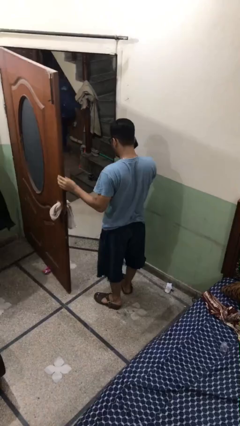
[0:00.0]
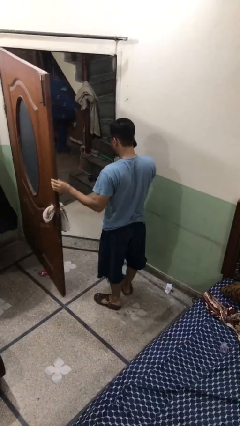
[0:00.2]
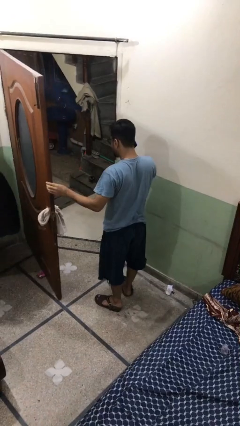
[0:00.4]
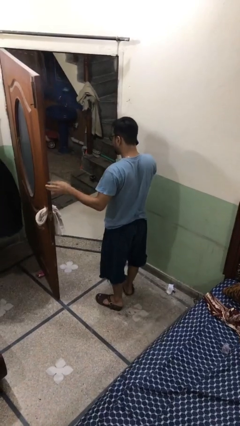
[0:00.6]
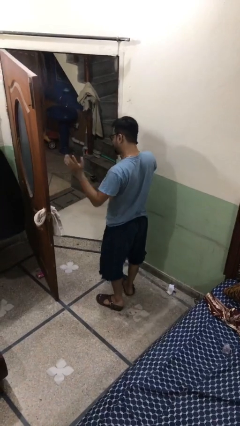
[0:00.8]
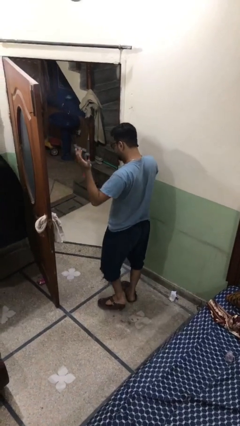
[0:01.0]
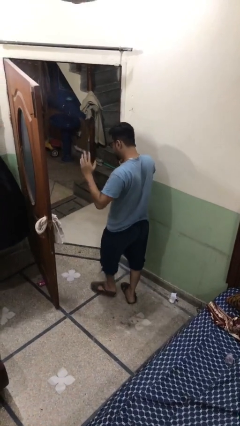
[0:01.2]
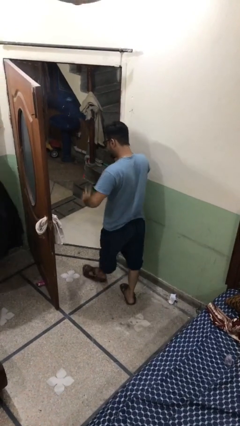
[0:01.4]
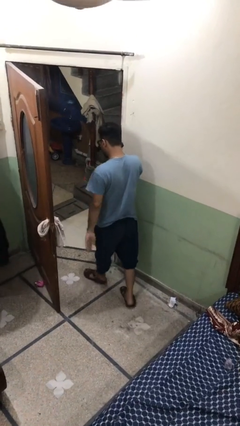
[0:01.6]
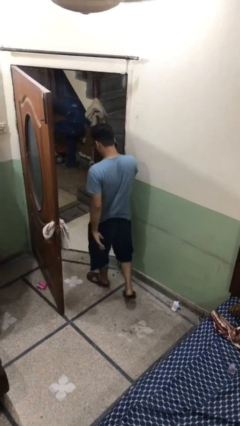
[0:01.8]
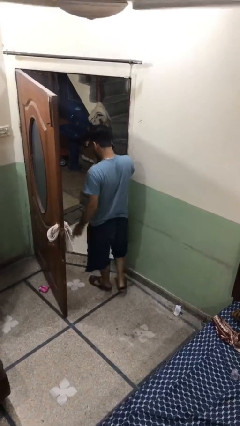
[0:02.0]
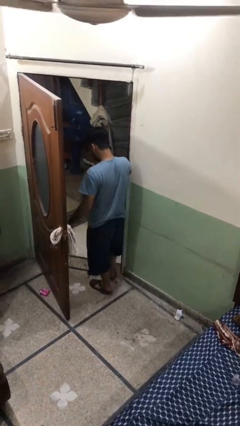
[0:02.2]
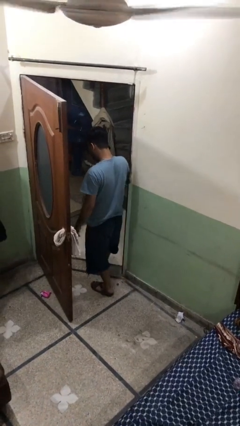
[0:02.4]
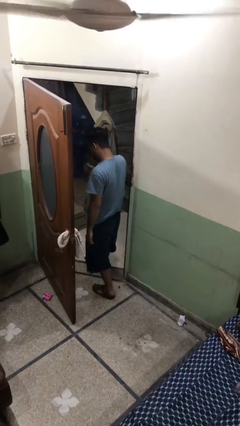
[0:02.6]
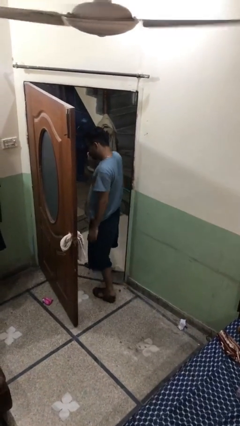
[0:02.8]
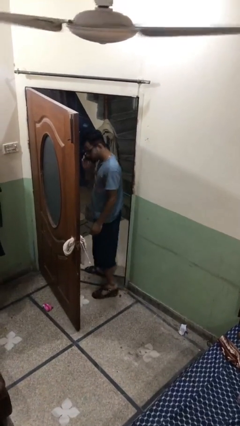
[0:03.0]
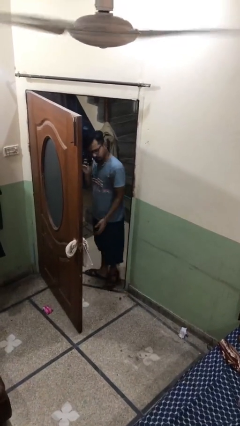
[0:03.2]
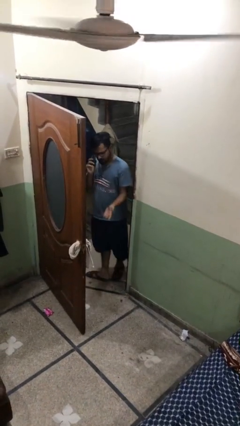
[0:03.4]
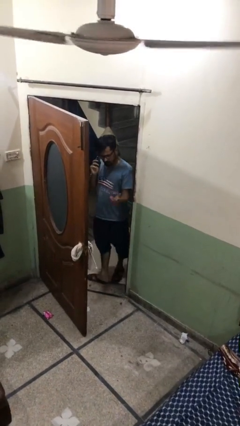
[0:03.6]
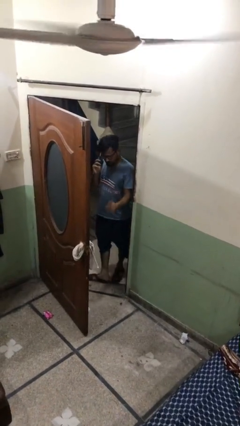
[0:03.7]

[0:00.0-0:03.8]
person exits scene through structure

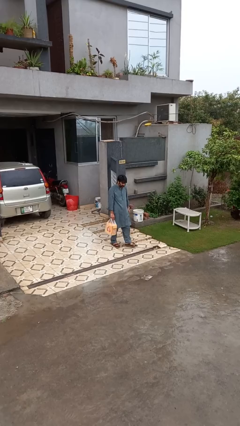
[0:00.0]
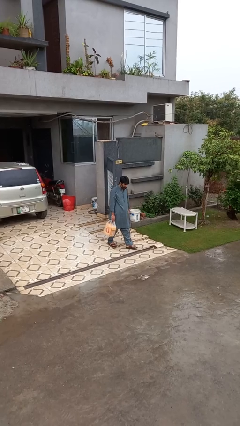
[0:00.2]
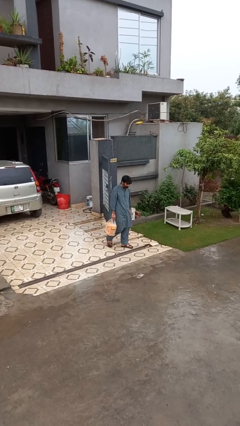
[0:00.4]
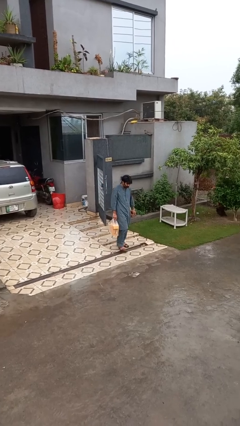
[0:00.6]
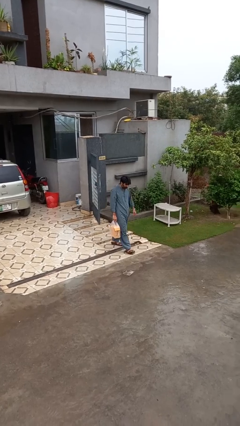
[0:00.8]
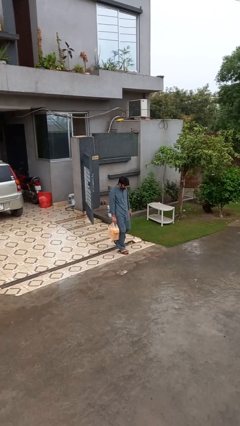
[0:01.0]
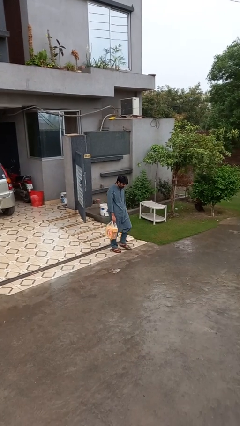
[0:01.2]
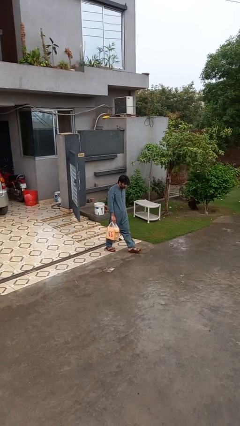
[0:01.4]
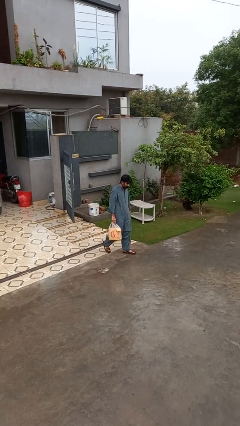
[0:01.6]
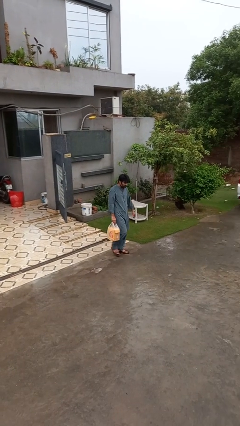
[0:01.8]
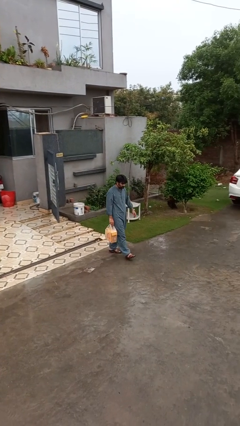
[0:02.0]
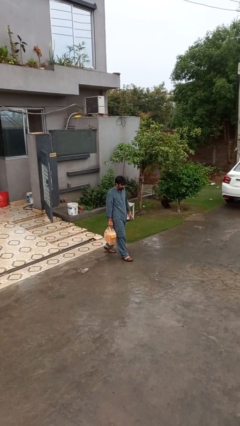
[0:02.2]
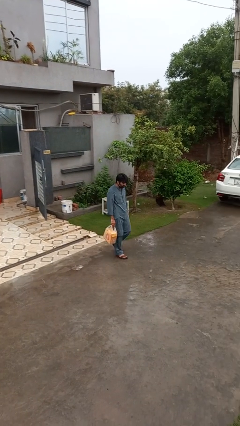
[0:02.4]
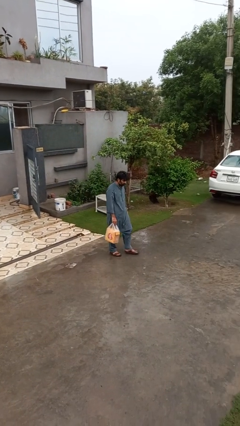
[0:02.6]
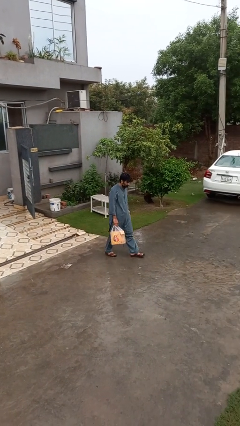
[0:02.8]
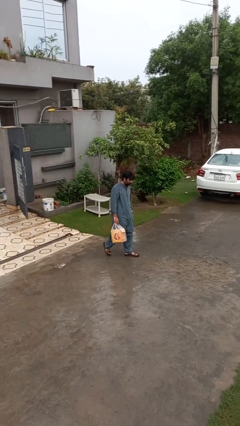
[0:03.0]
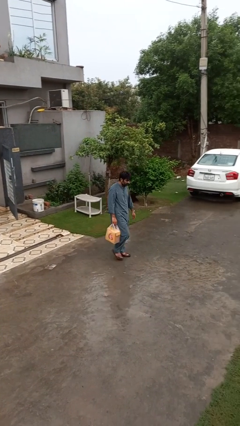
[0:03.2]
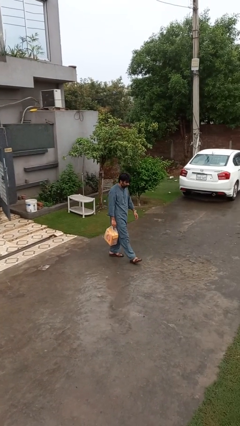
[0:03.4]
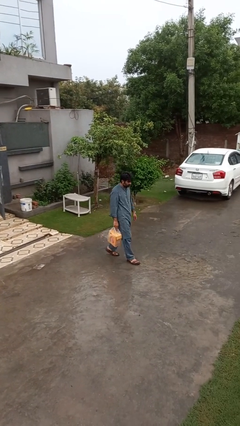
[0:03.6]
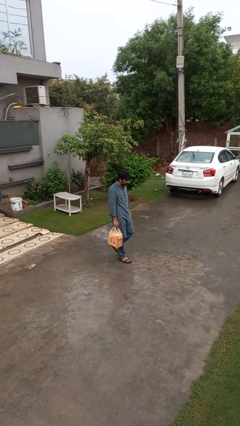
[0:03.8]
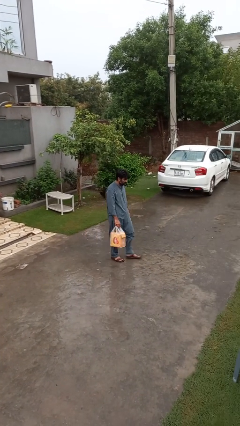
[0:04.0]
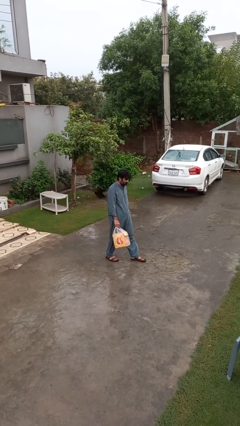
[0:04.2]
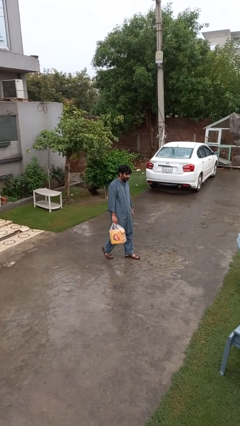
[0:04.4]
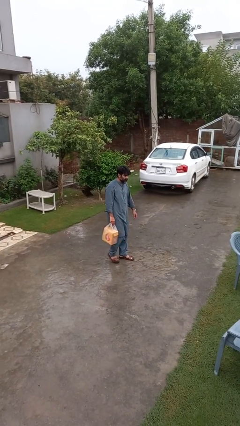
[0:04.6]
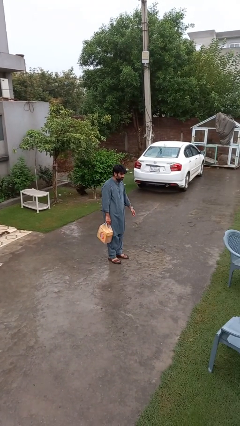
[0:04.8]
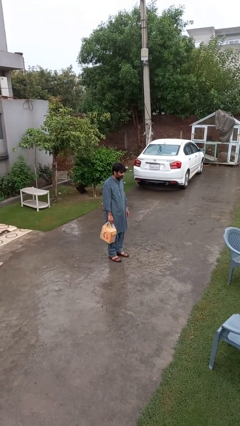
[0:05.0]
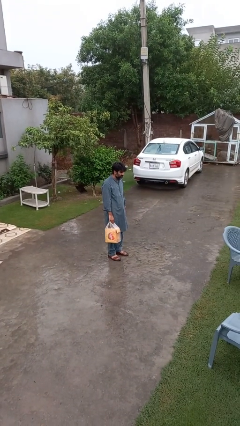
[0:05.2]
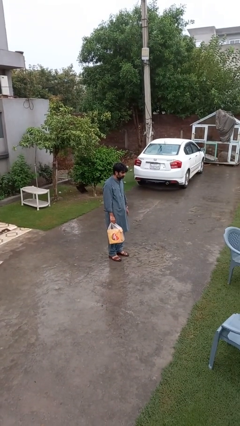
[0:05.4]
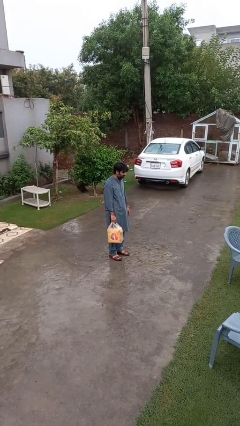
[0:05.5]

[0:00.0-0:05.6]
person carries groceries

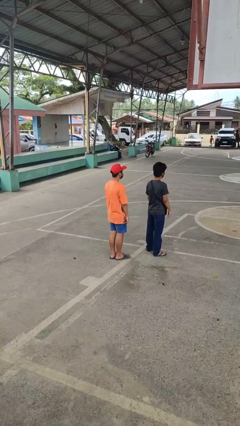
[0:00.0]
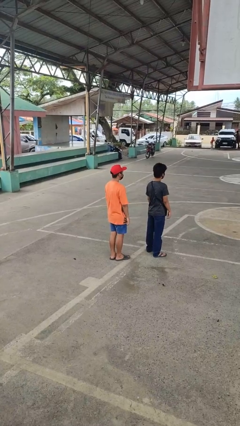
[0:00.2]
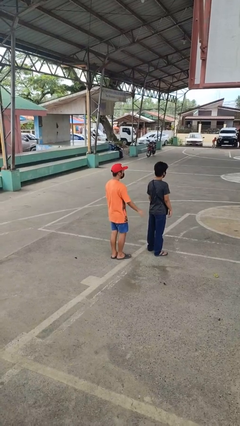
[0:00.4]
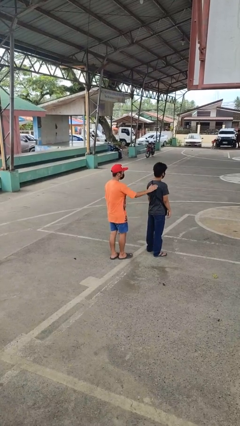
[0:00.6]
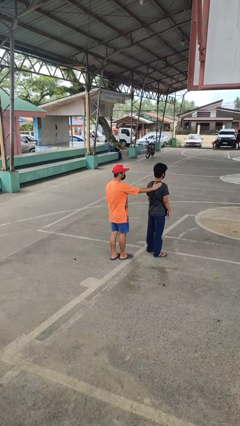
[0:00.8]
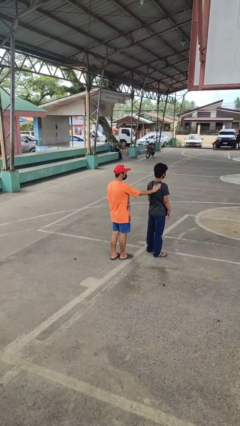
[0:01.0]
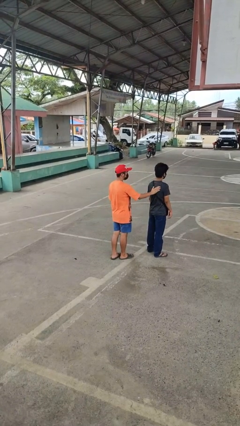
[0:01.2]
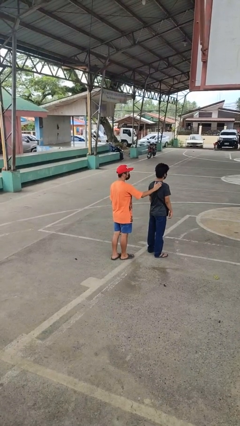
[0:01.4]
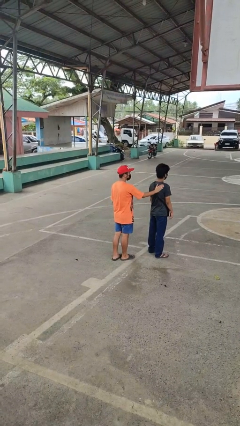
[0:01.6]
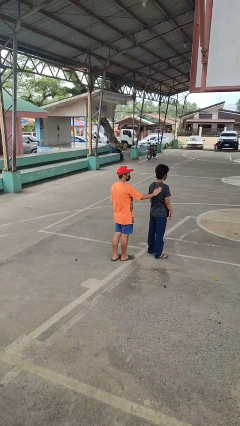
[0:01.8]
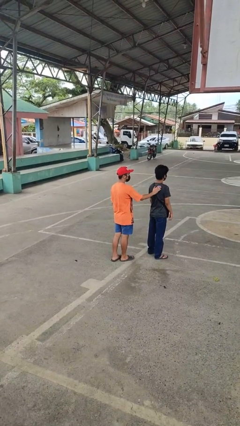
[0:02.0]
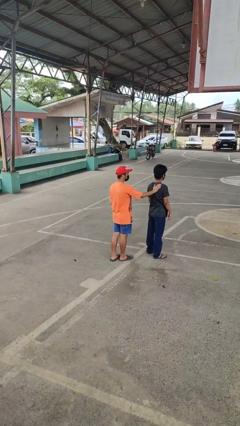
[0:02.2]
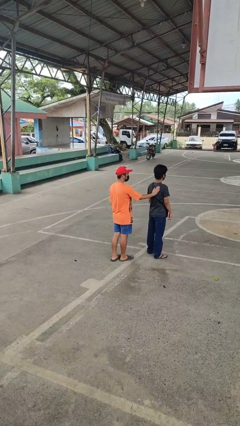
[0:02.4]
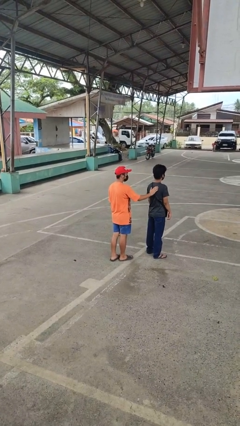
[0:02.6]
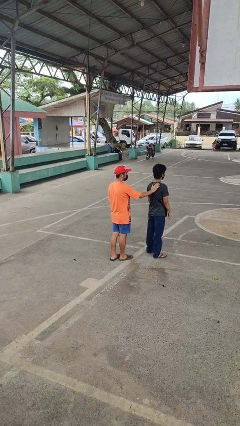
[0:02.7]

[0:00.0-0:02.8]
person touches back of person

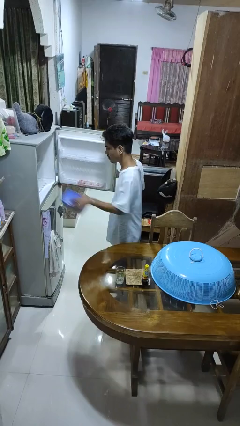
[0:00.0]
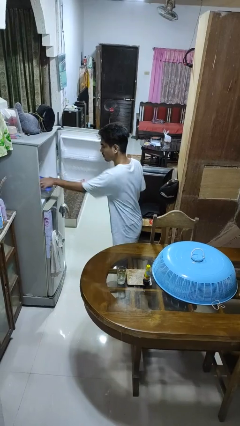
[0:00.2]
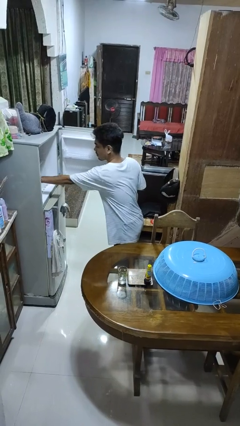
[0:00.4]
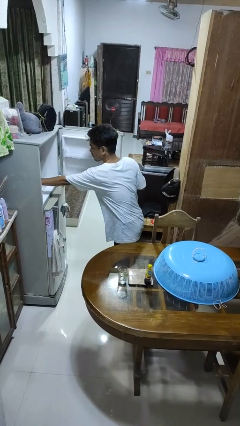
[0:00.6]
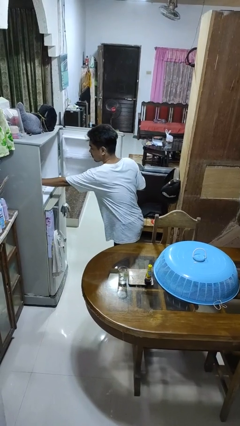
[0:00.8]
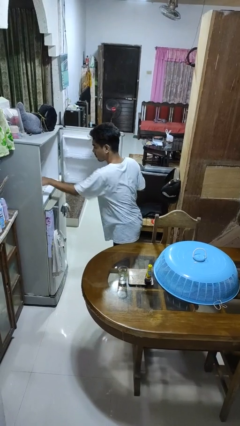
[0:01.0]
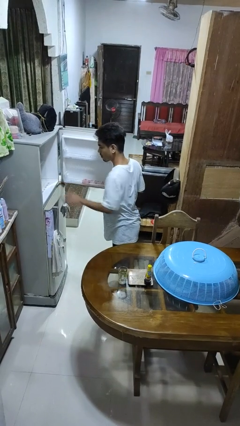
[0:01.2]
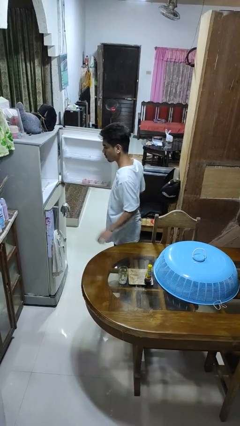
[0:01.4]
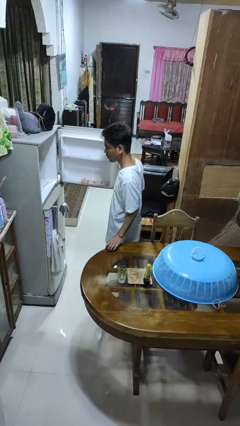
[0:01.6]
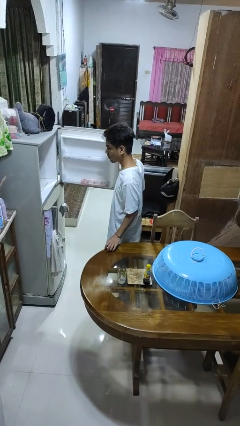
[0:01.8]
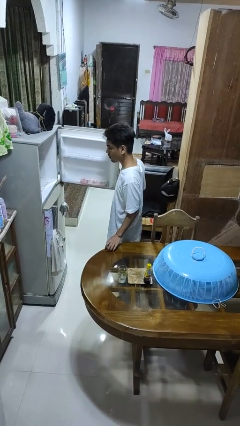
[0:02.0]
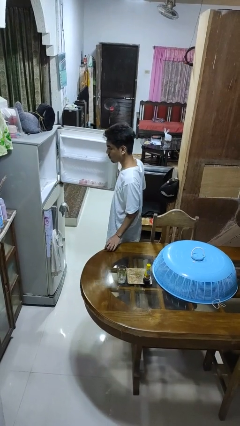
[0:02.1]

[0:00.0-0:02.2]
person puts object into refrigerator

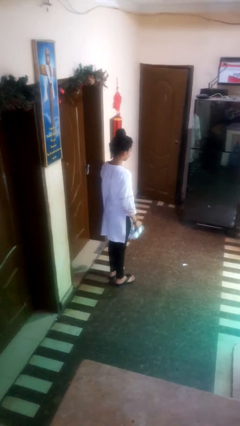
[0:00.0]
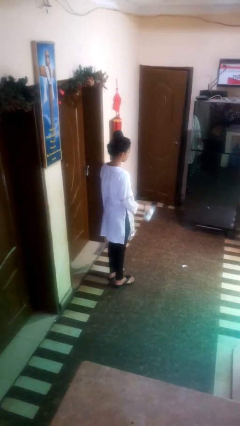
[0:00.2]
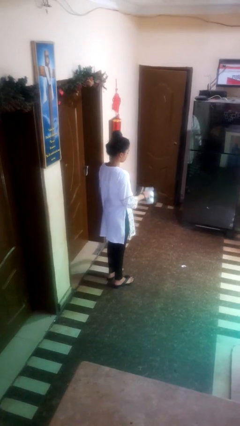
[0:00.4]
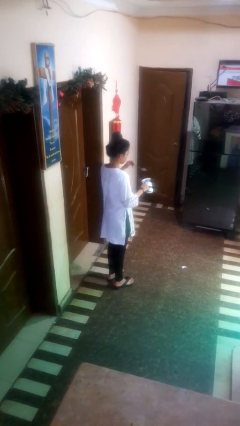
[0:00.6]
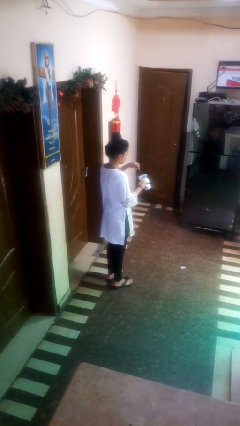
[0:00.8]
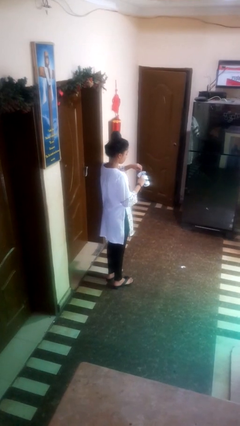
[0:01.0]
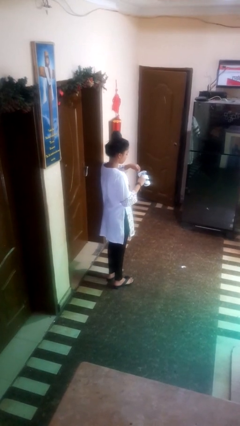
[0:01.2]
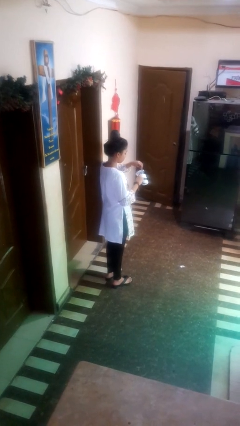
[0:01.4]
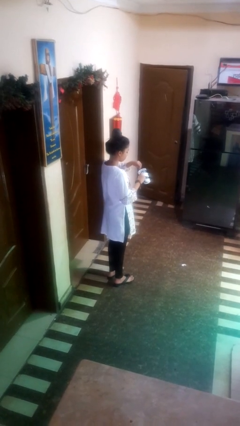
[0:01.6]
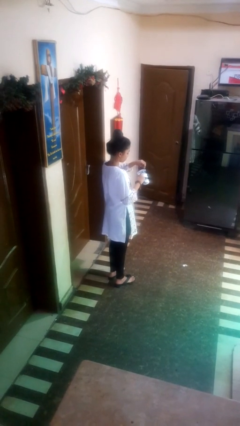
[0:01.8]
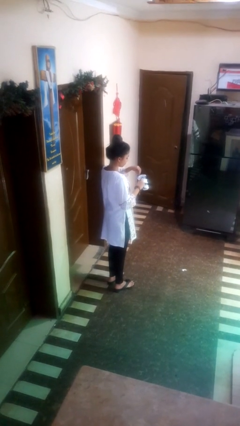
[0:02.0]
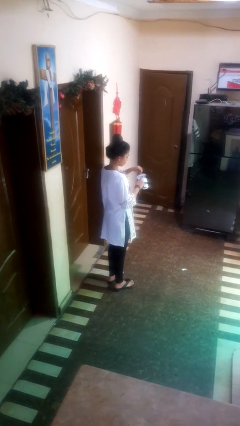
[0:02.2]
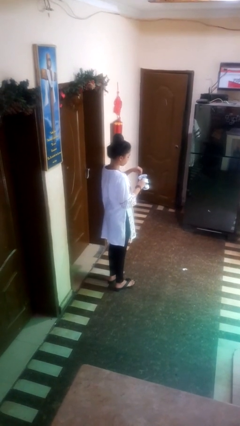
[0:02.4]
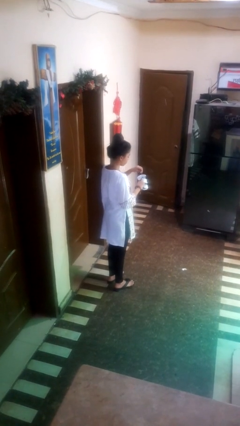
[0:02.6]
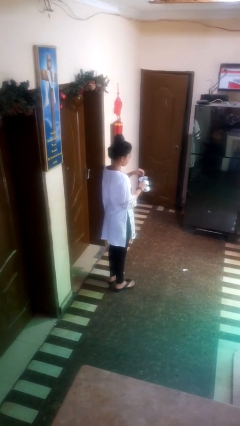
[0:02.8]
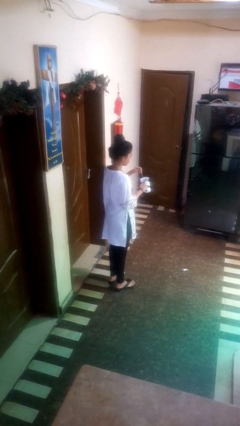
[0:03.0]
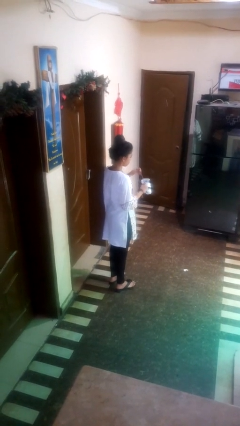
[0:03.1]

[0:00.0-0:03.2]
person stirs mug
